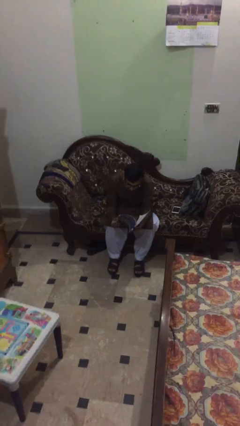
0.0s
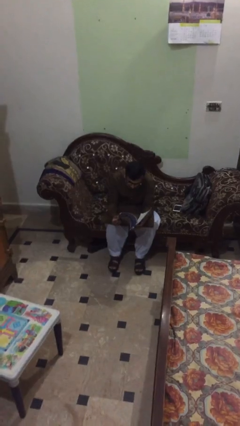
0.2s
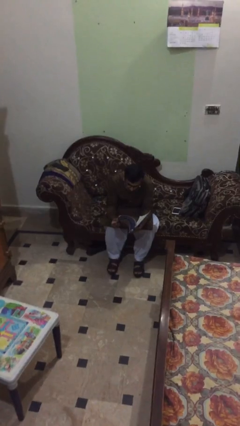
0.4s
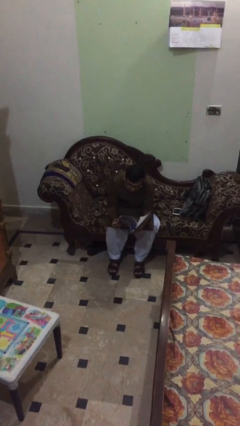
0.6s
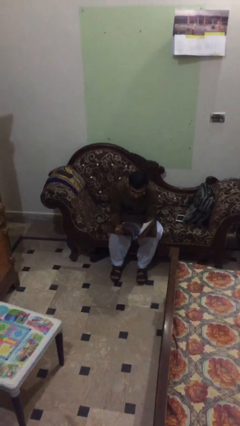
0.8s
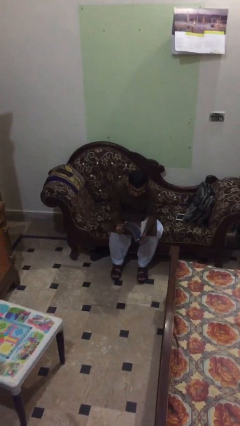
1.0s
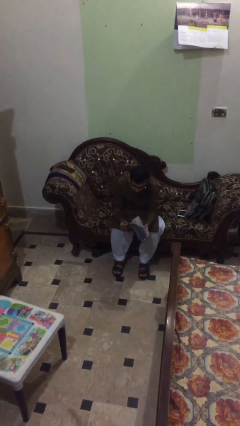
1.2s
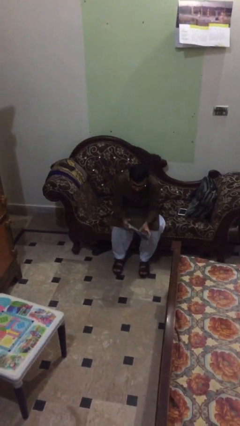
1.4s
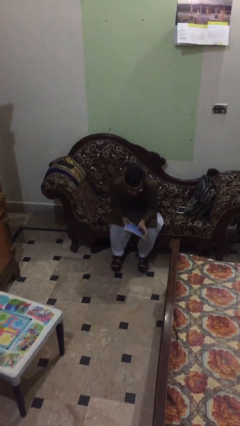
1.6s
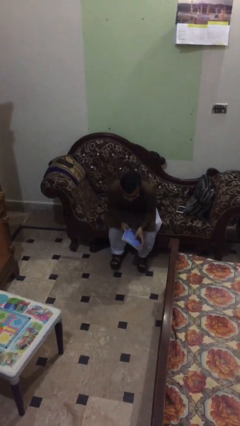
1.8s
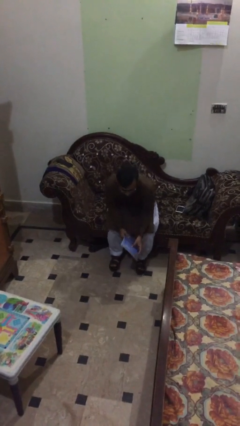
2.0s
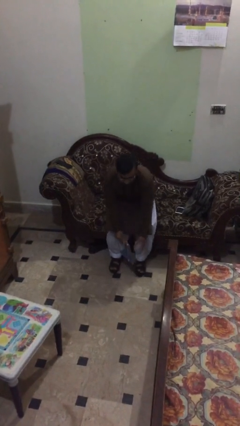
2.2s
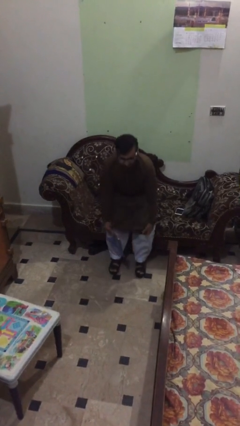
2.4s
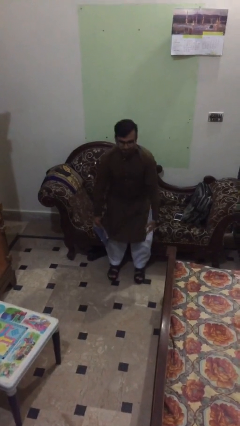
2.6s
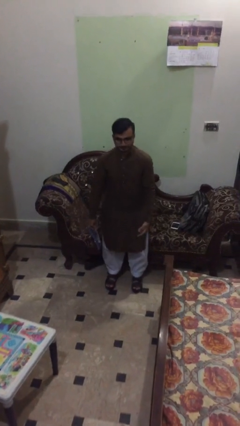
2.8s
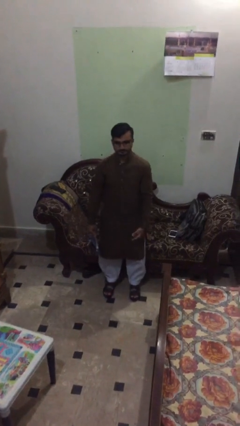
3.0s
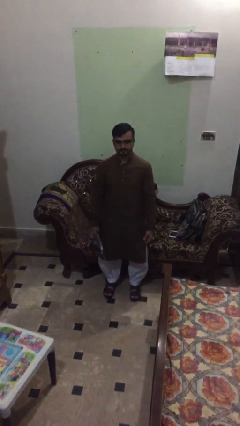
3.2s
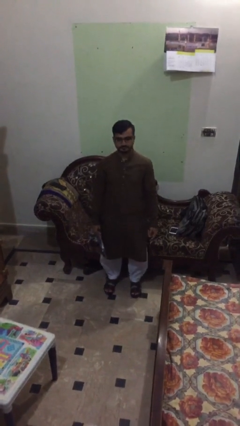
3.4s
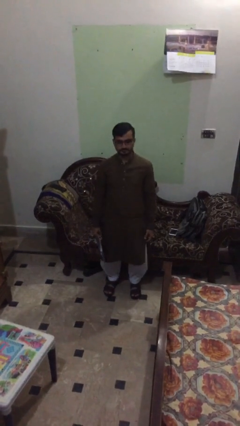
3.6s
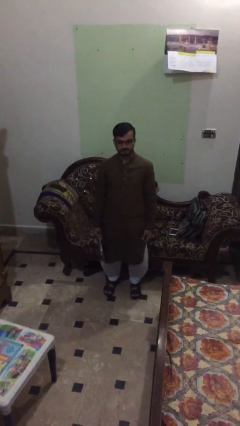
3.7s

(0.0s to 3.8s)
person stands up

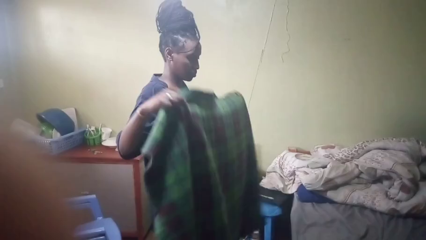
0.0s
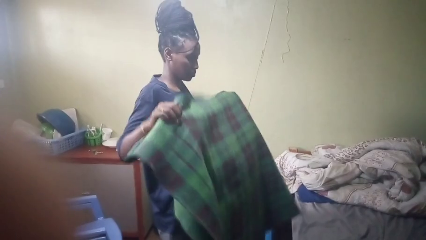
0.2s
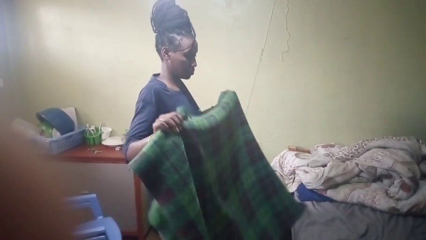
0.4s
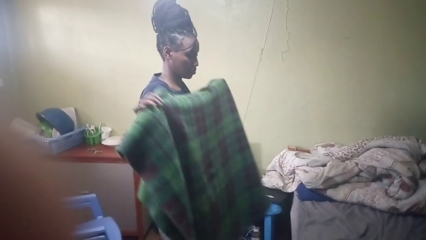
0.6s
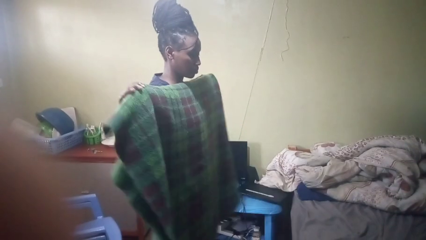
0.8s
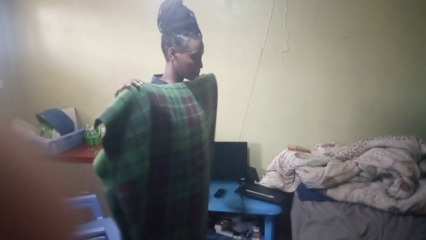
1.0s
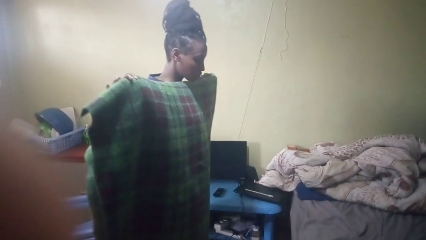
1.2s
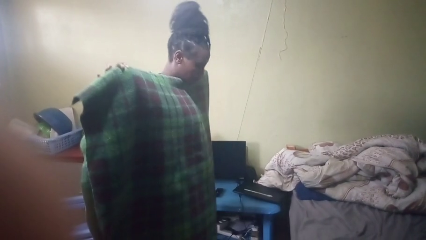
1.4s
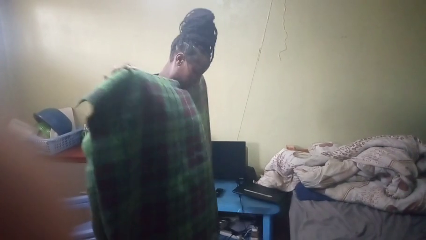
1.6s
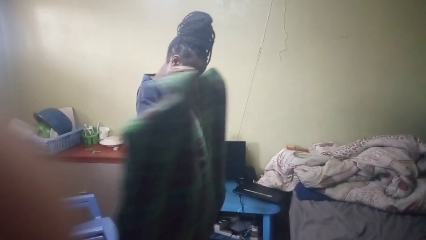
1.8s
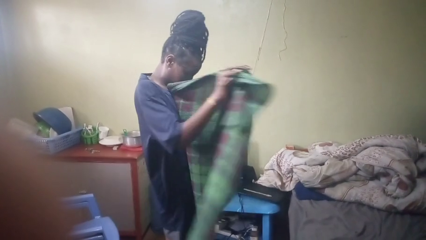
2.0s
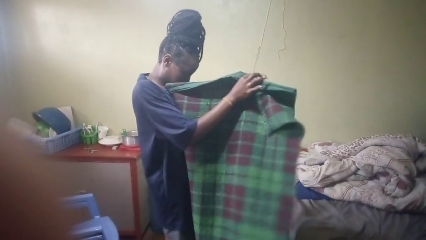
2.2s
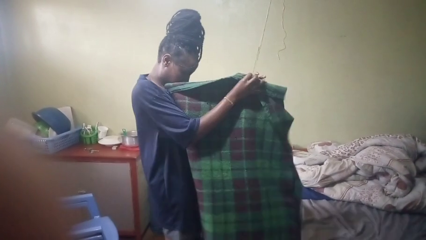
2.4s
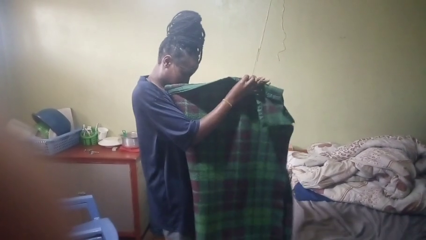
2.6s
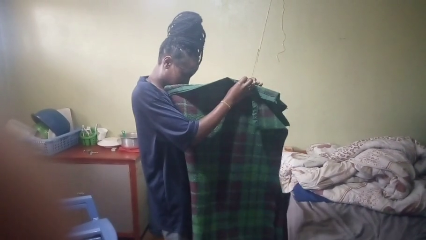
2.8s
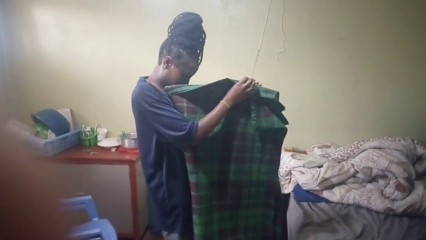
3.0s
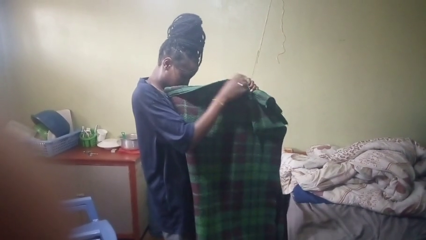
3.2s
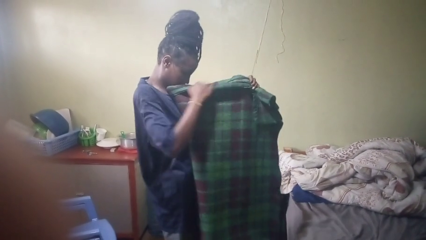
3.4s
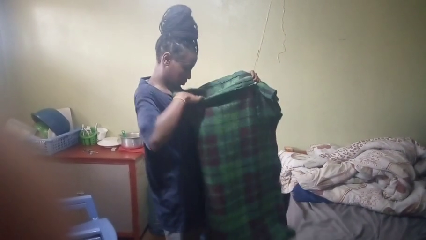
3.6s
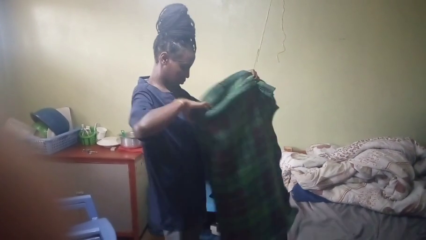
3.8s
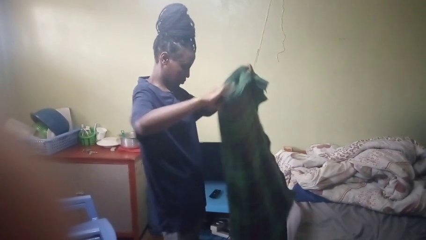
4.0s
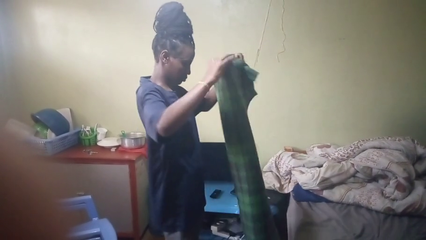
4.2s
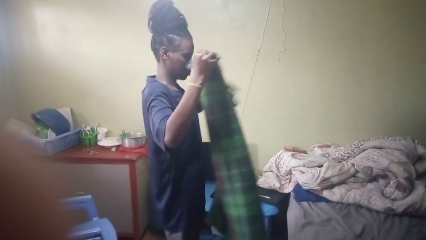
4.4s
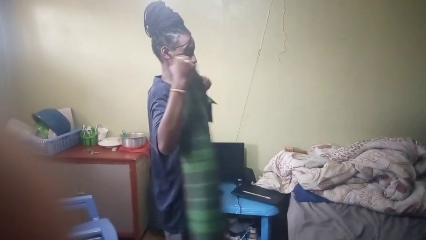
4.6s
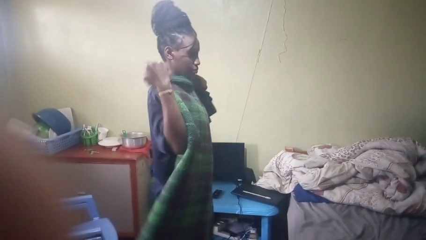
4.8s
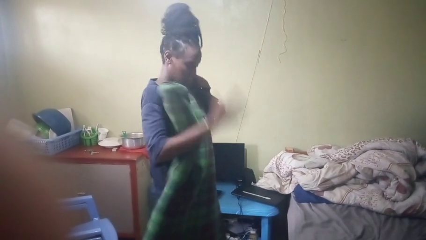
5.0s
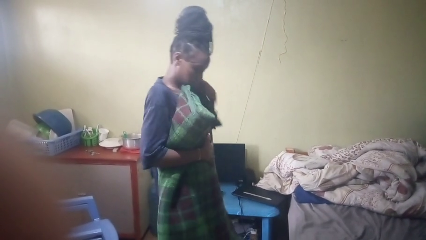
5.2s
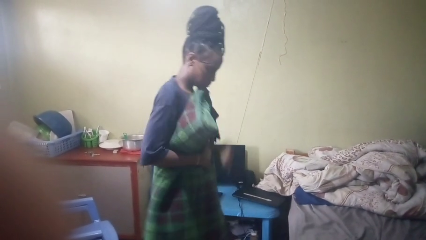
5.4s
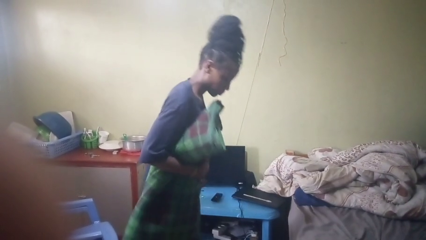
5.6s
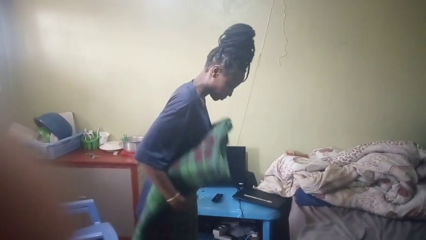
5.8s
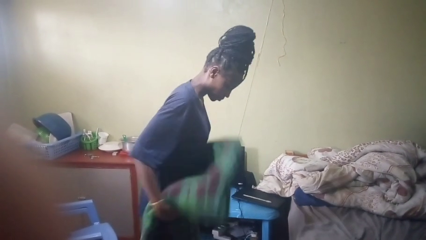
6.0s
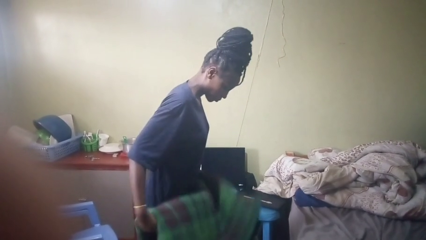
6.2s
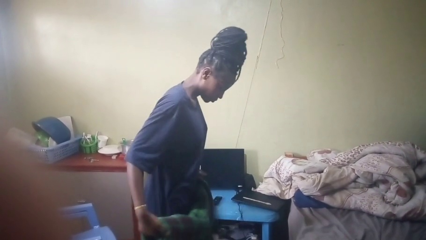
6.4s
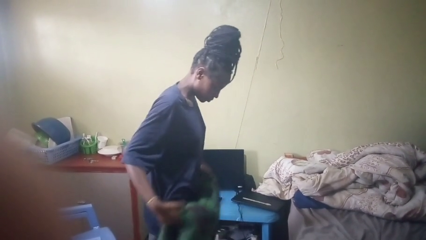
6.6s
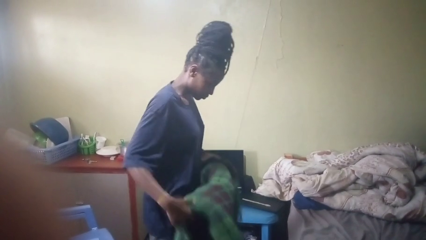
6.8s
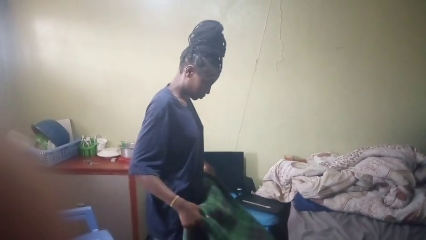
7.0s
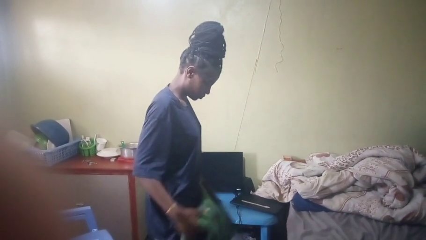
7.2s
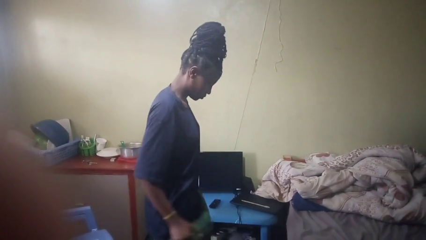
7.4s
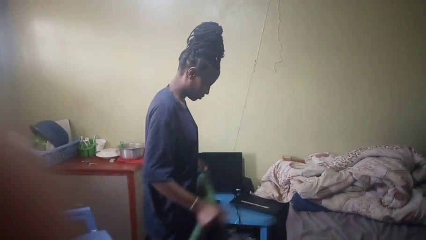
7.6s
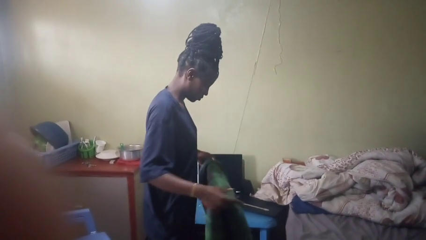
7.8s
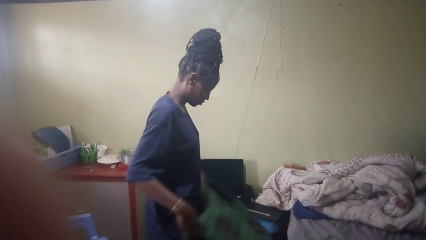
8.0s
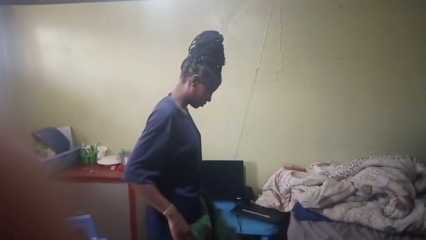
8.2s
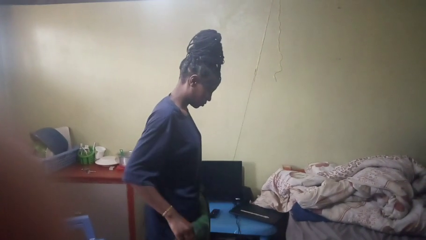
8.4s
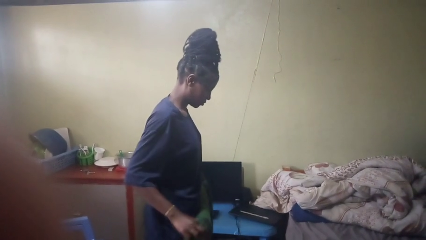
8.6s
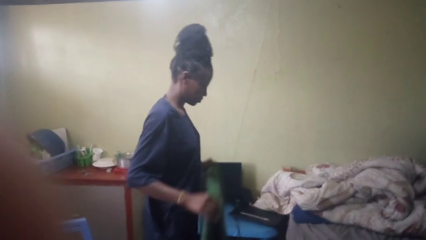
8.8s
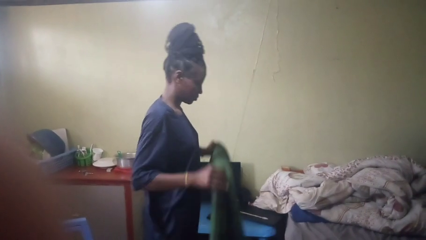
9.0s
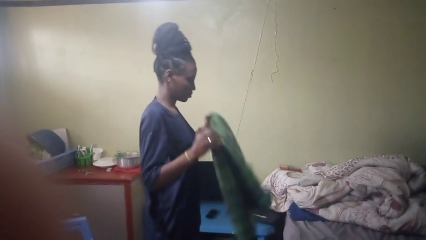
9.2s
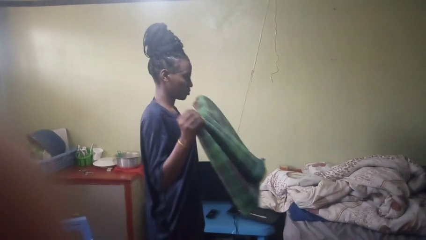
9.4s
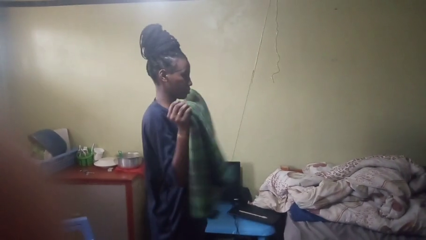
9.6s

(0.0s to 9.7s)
person folds blanket

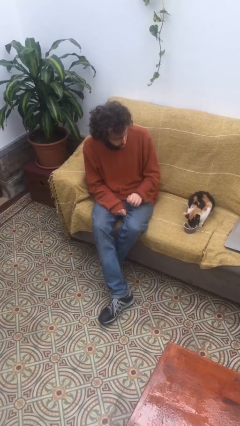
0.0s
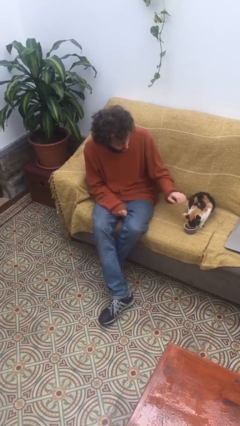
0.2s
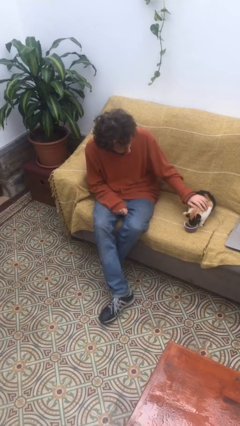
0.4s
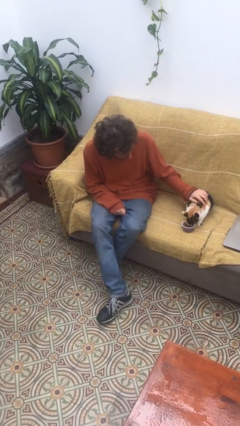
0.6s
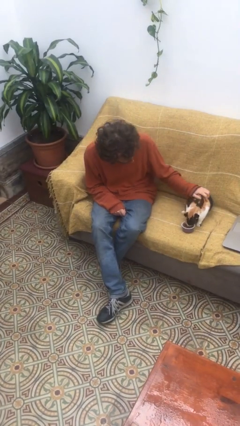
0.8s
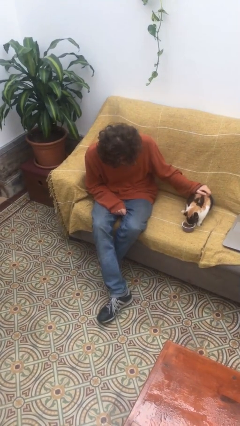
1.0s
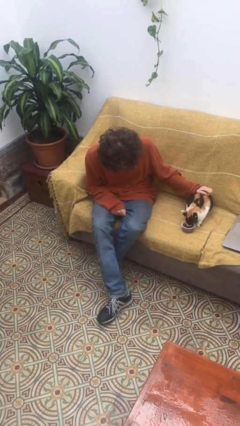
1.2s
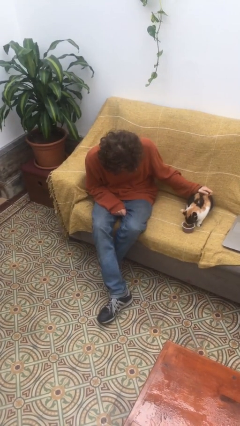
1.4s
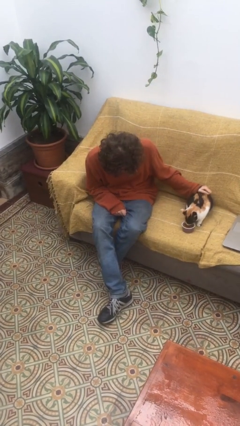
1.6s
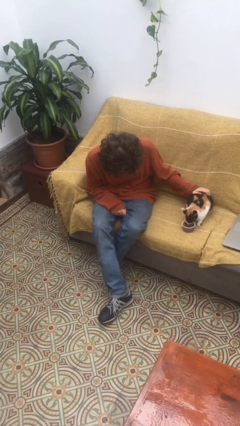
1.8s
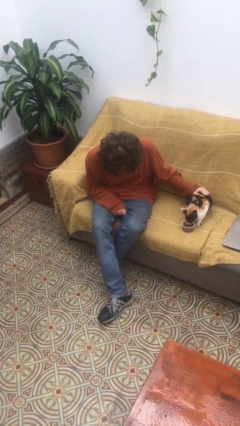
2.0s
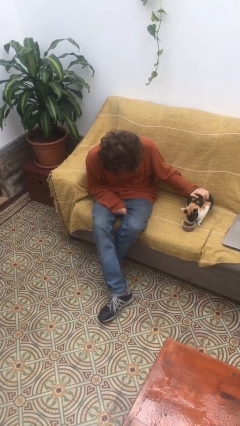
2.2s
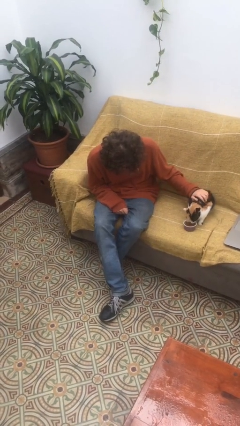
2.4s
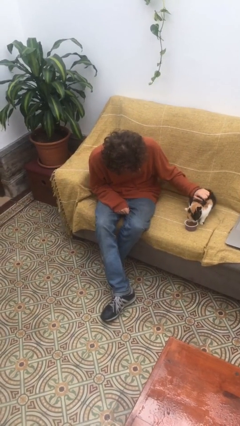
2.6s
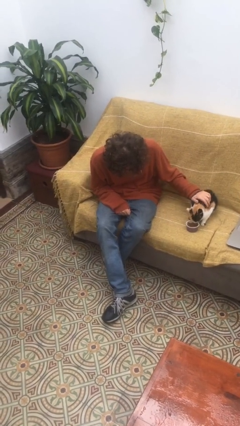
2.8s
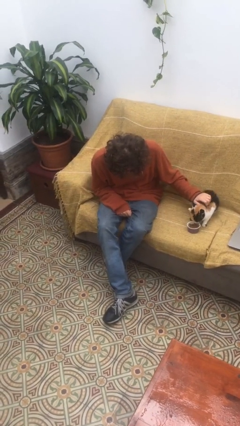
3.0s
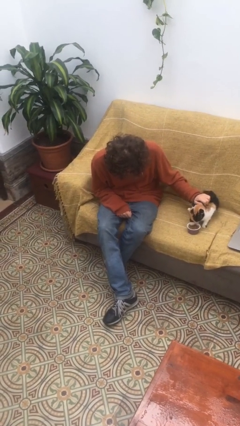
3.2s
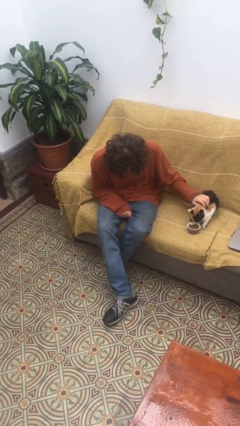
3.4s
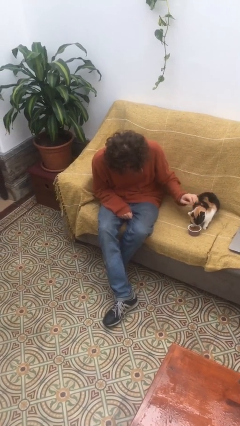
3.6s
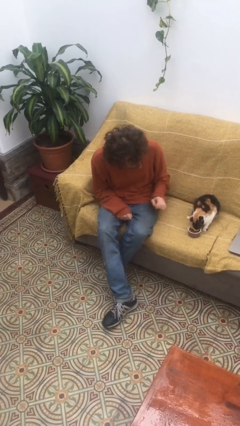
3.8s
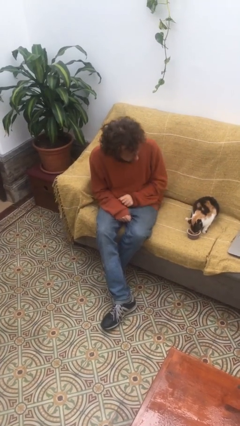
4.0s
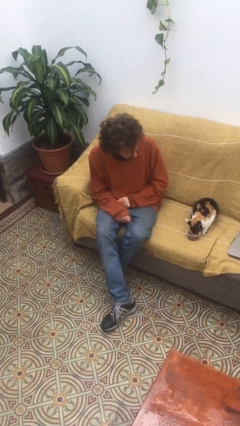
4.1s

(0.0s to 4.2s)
person pets cat

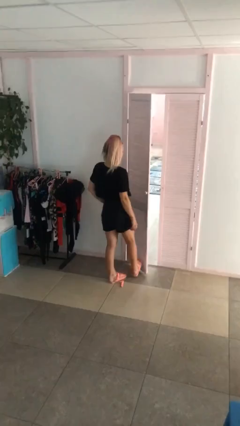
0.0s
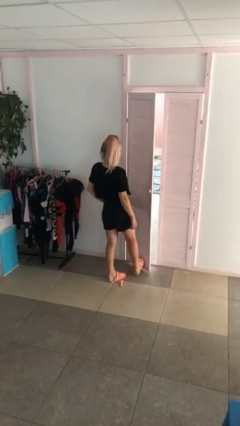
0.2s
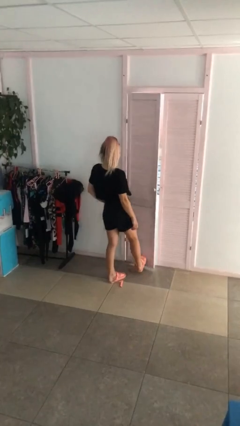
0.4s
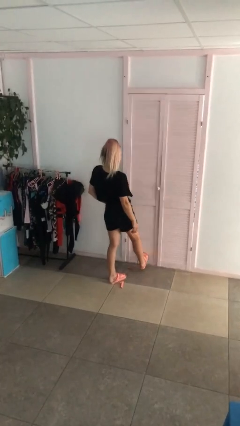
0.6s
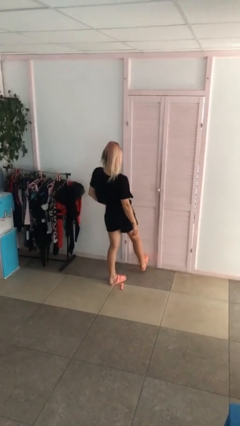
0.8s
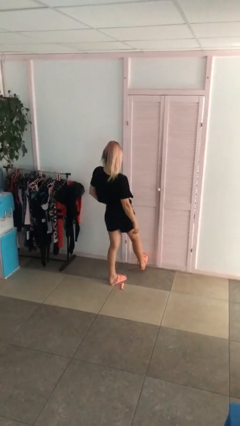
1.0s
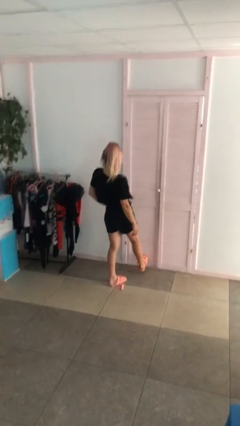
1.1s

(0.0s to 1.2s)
person closes door with foot
